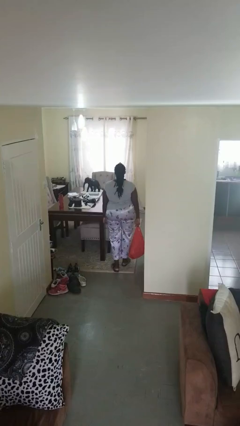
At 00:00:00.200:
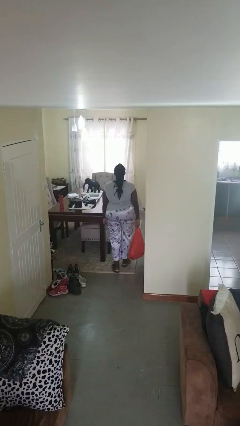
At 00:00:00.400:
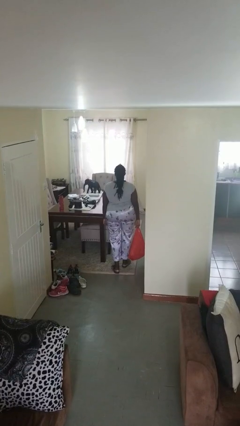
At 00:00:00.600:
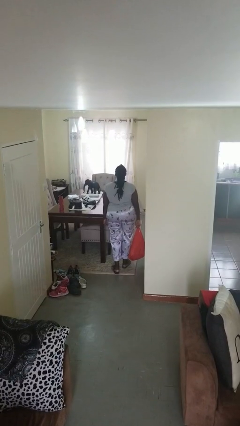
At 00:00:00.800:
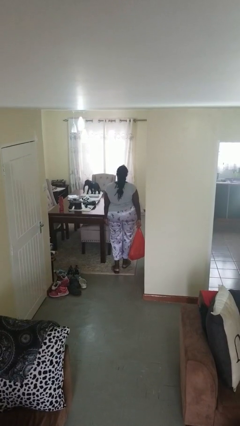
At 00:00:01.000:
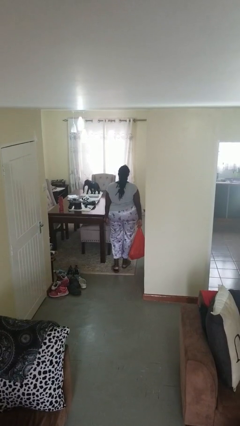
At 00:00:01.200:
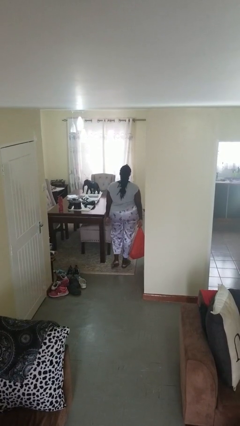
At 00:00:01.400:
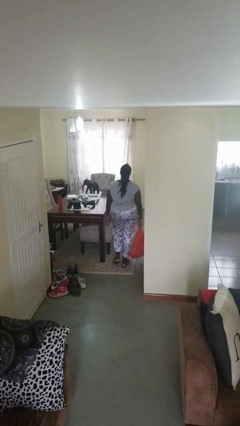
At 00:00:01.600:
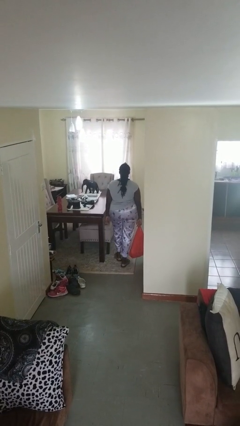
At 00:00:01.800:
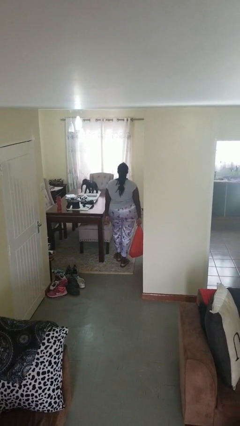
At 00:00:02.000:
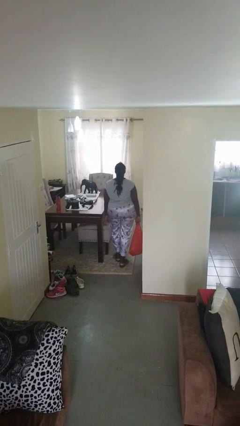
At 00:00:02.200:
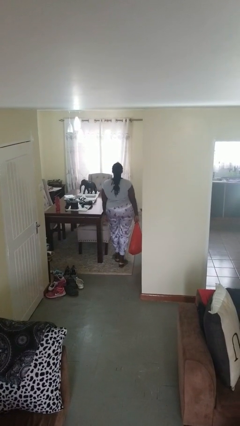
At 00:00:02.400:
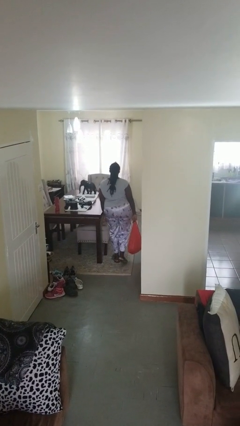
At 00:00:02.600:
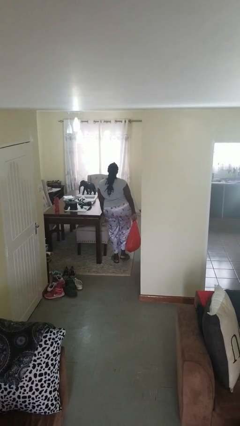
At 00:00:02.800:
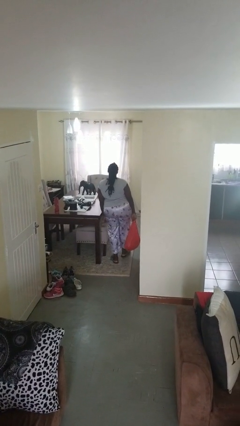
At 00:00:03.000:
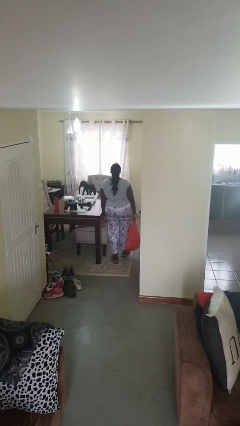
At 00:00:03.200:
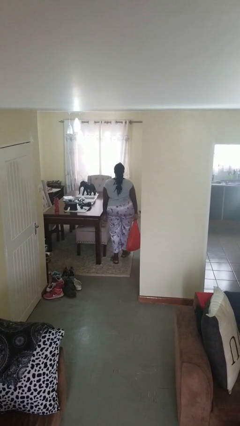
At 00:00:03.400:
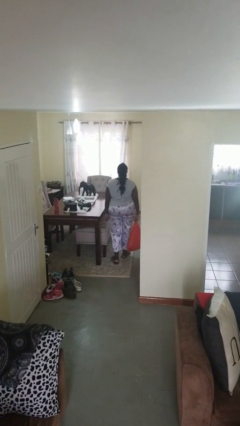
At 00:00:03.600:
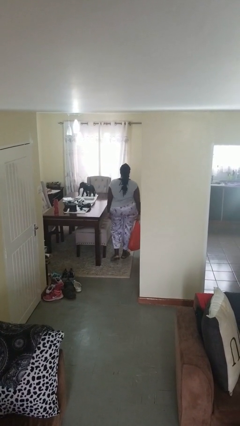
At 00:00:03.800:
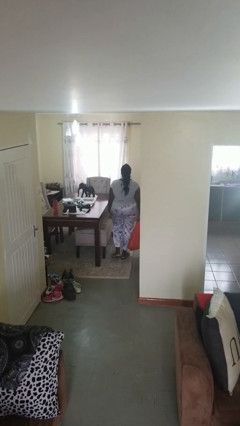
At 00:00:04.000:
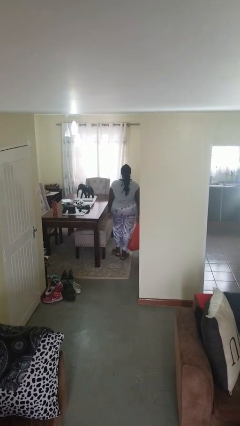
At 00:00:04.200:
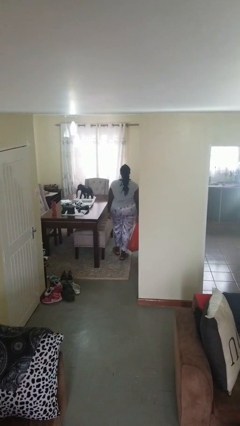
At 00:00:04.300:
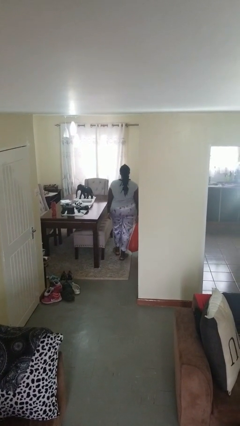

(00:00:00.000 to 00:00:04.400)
person carries groceries

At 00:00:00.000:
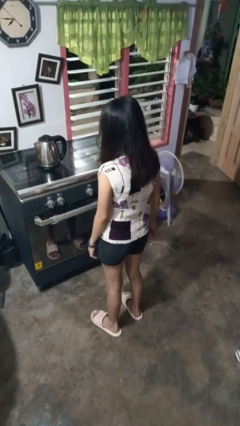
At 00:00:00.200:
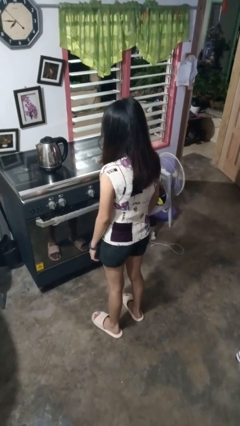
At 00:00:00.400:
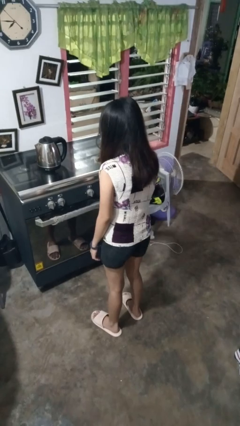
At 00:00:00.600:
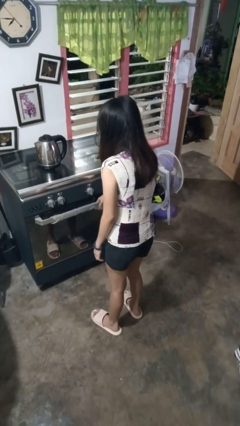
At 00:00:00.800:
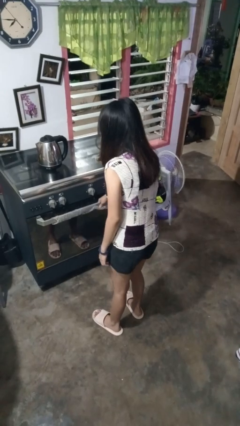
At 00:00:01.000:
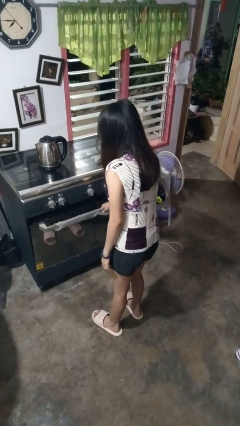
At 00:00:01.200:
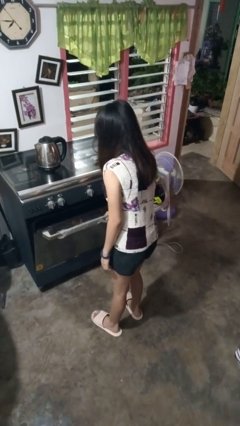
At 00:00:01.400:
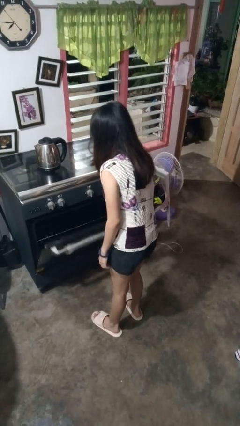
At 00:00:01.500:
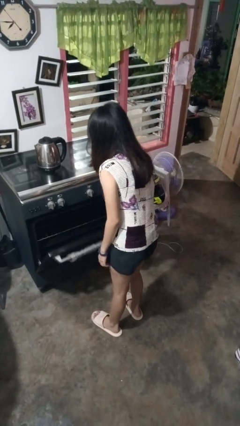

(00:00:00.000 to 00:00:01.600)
person opens oven door

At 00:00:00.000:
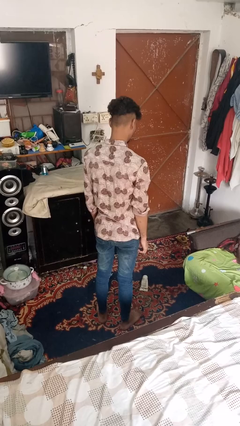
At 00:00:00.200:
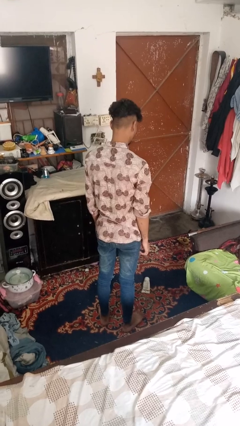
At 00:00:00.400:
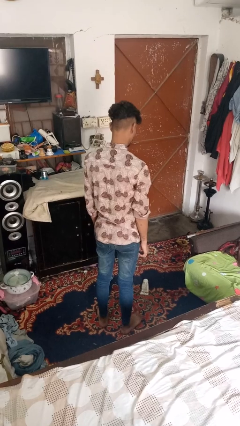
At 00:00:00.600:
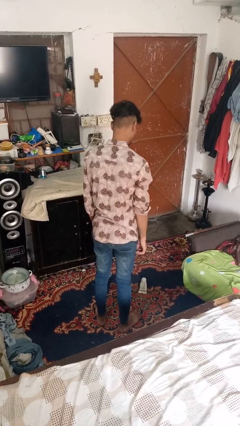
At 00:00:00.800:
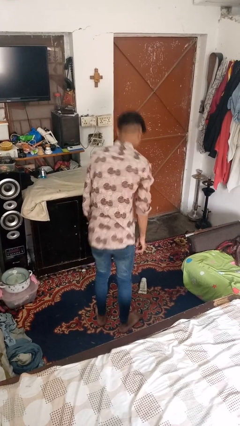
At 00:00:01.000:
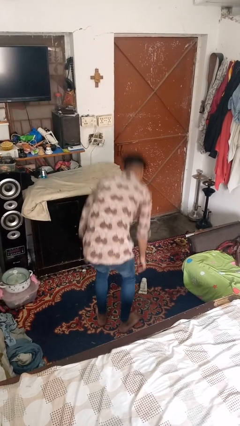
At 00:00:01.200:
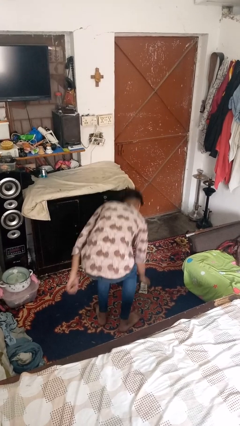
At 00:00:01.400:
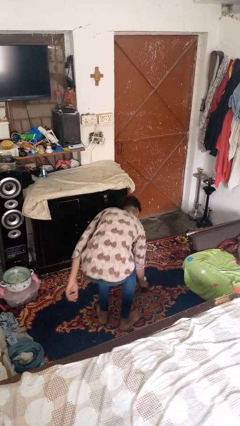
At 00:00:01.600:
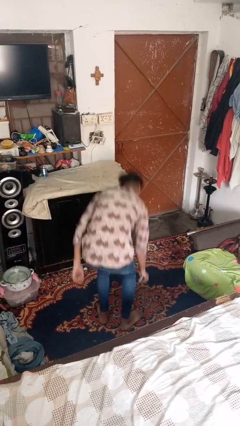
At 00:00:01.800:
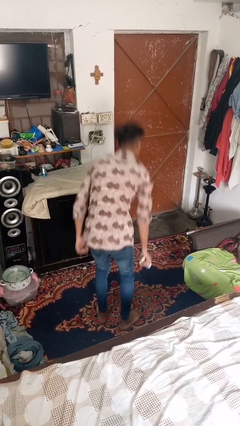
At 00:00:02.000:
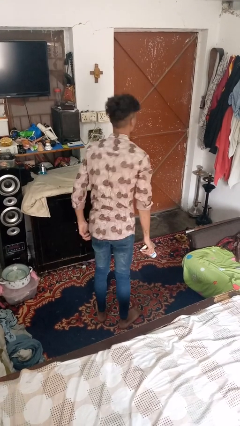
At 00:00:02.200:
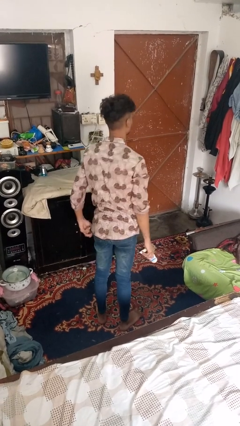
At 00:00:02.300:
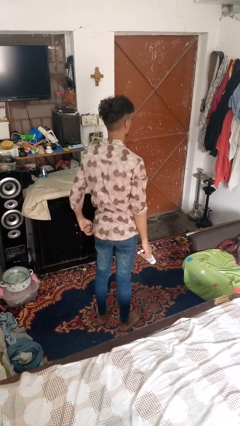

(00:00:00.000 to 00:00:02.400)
person picks up object from floor

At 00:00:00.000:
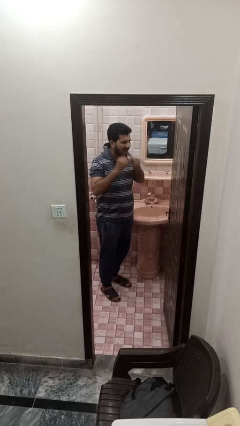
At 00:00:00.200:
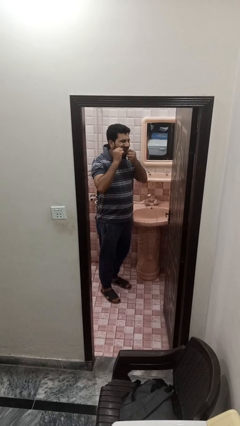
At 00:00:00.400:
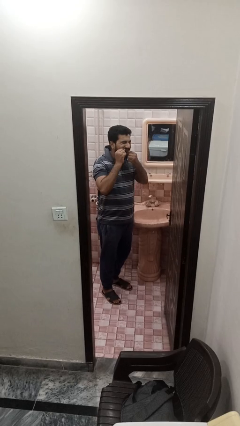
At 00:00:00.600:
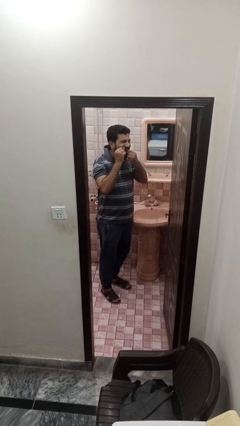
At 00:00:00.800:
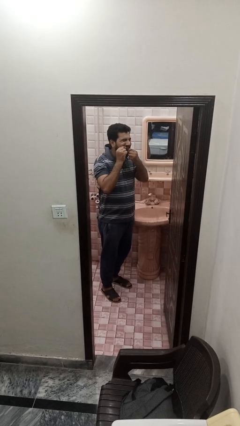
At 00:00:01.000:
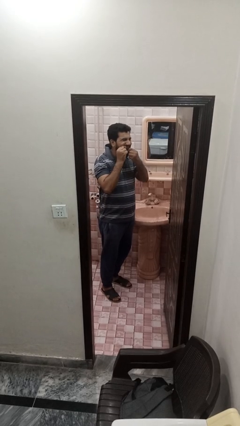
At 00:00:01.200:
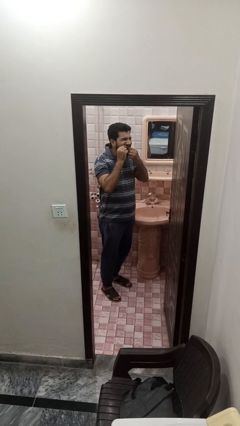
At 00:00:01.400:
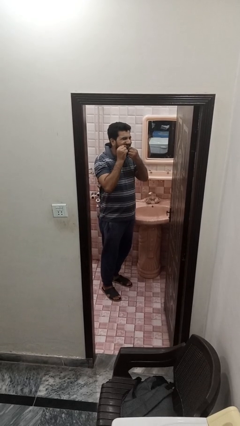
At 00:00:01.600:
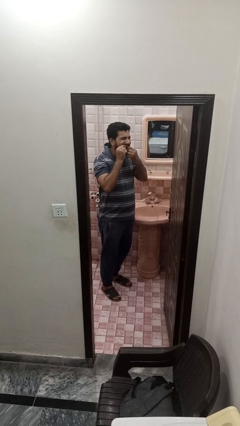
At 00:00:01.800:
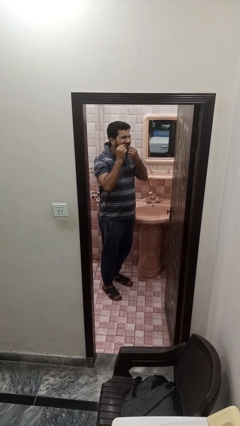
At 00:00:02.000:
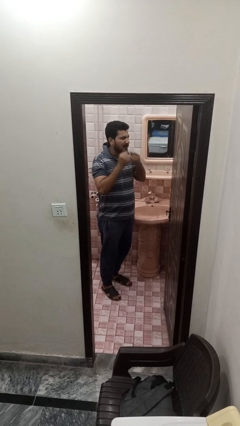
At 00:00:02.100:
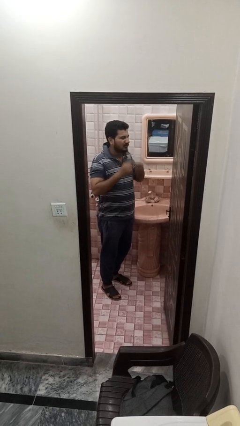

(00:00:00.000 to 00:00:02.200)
person flosses

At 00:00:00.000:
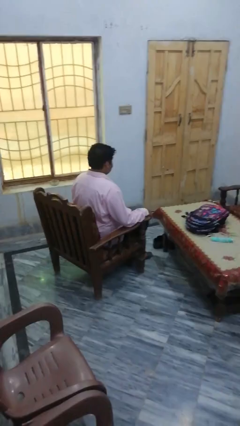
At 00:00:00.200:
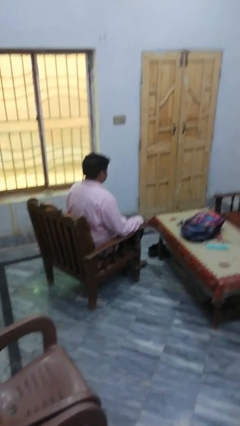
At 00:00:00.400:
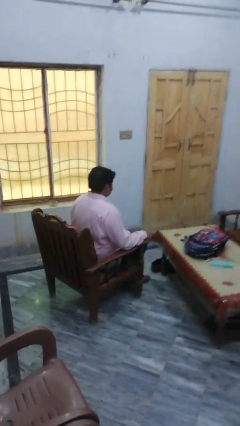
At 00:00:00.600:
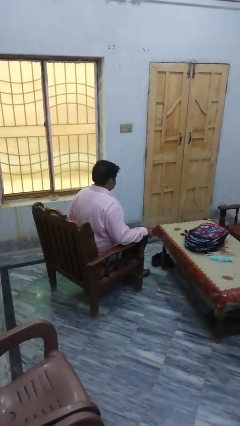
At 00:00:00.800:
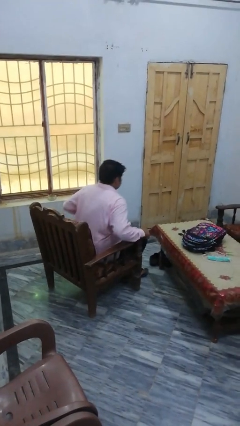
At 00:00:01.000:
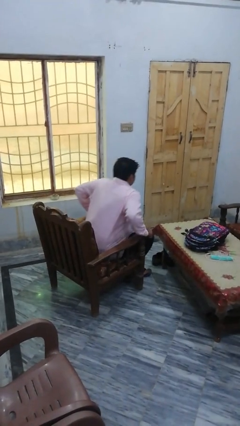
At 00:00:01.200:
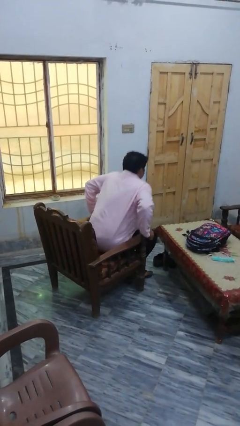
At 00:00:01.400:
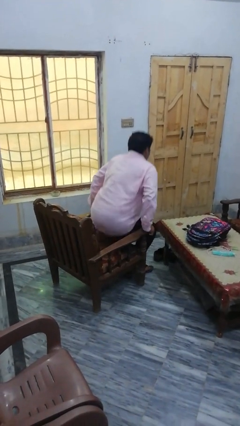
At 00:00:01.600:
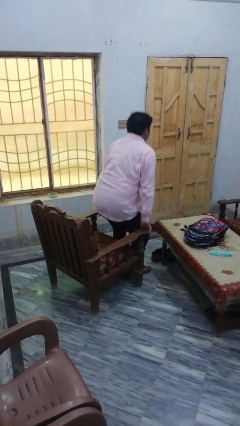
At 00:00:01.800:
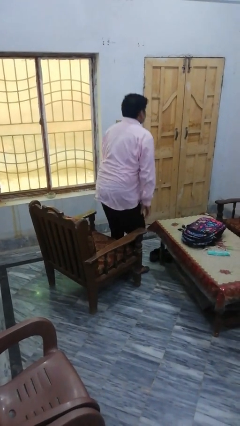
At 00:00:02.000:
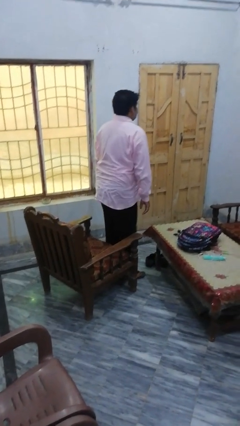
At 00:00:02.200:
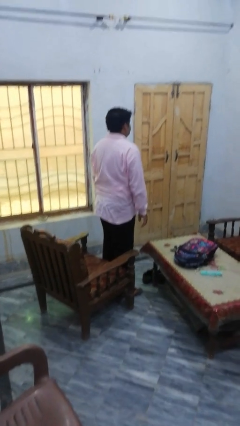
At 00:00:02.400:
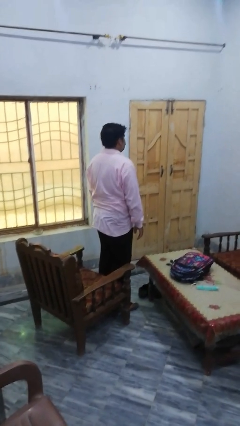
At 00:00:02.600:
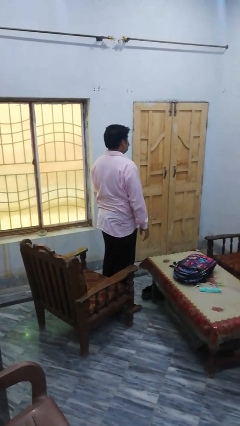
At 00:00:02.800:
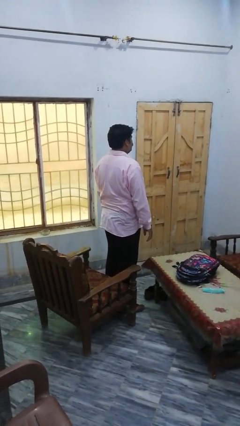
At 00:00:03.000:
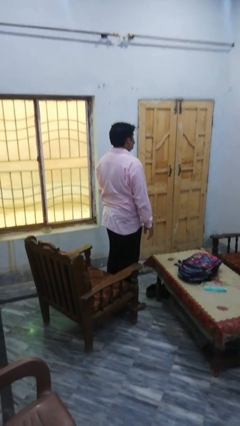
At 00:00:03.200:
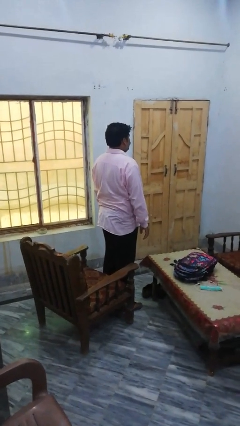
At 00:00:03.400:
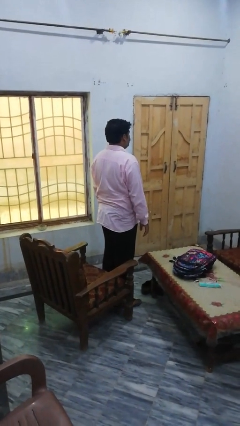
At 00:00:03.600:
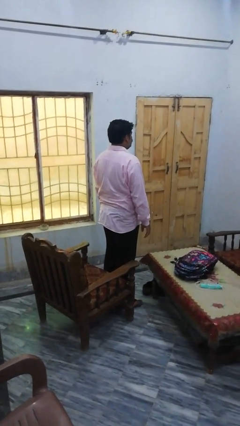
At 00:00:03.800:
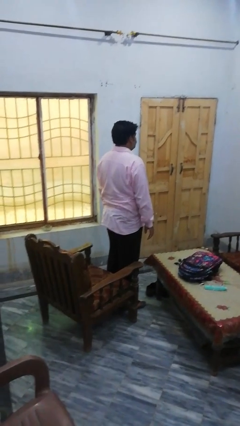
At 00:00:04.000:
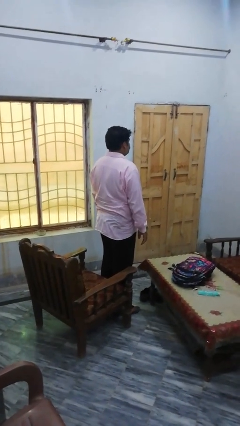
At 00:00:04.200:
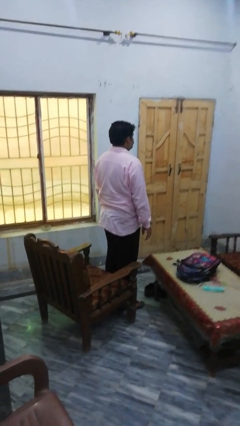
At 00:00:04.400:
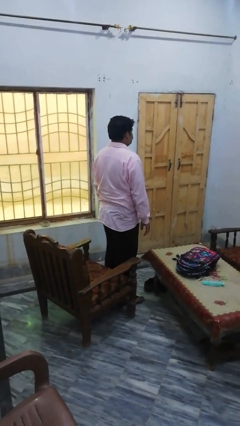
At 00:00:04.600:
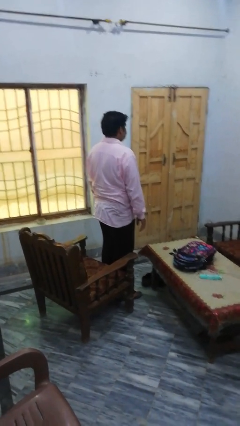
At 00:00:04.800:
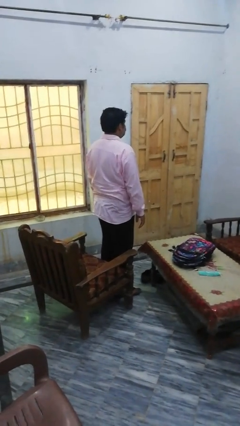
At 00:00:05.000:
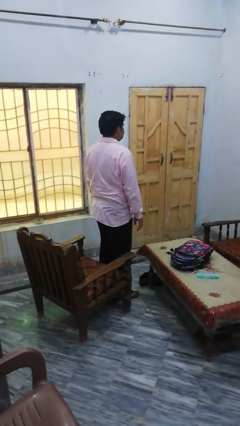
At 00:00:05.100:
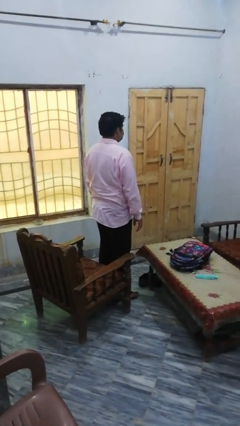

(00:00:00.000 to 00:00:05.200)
person stands up

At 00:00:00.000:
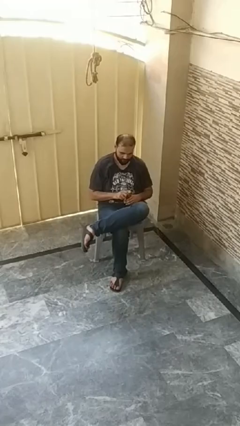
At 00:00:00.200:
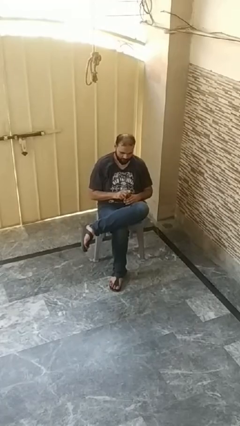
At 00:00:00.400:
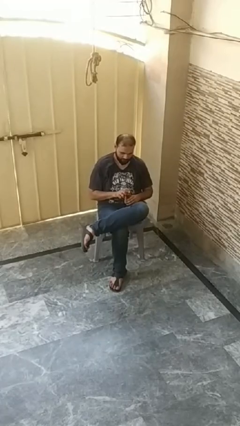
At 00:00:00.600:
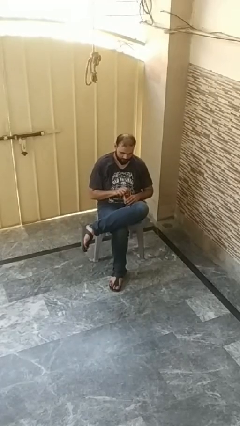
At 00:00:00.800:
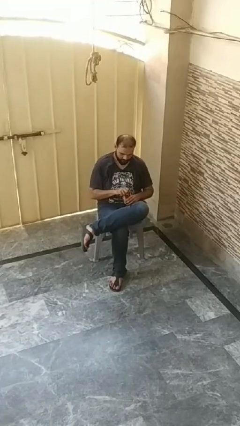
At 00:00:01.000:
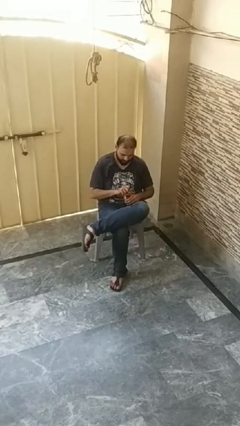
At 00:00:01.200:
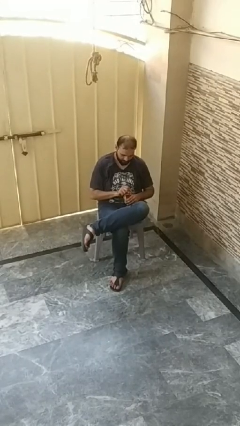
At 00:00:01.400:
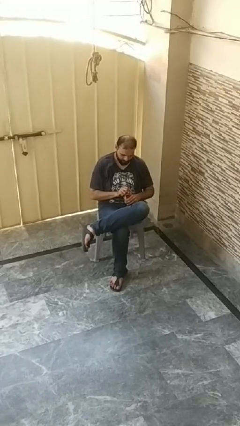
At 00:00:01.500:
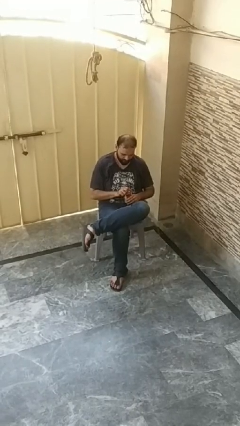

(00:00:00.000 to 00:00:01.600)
person opens beverage can
